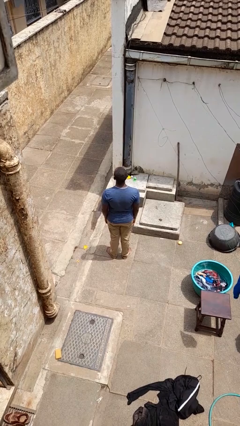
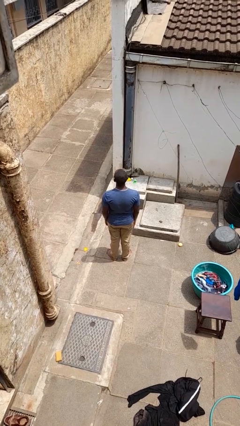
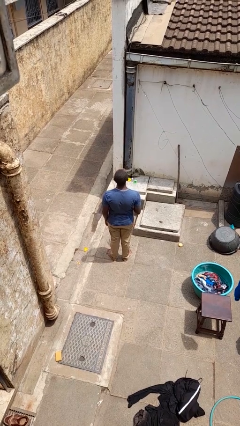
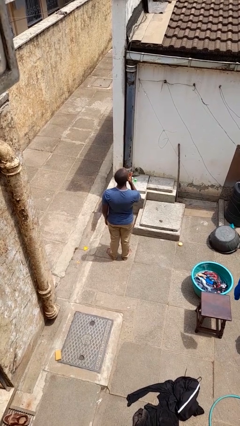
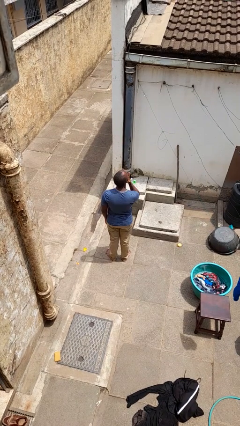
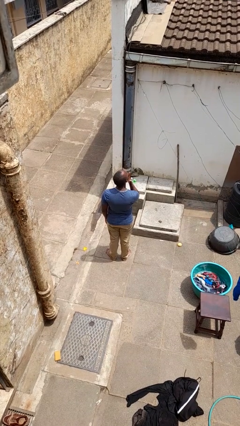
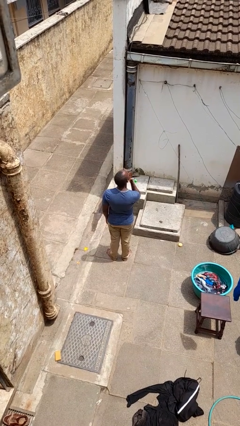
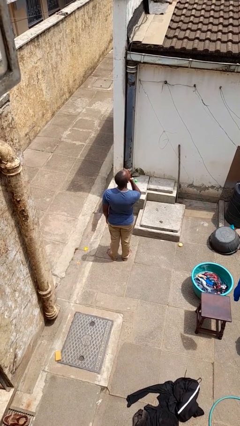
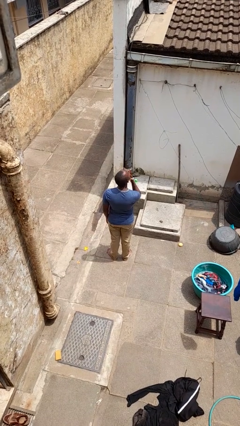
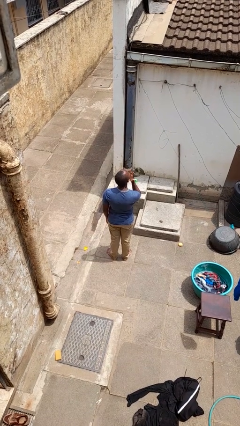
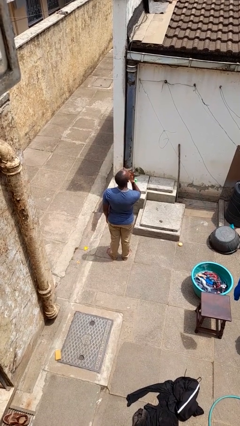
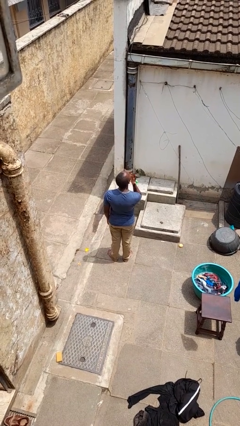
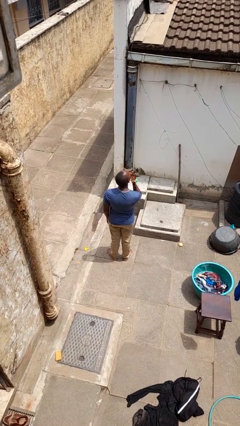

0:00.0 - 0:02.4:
person licks fingers

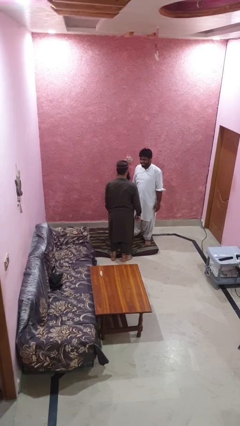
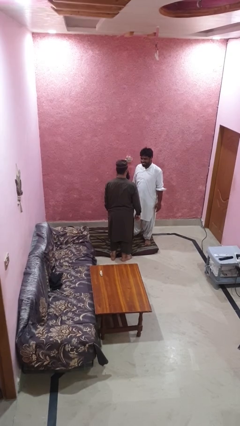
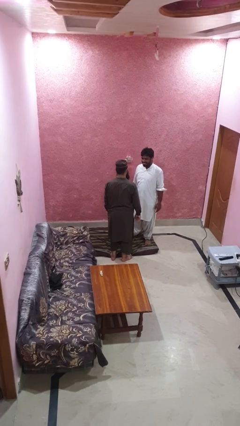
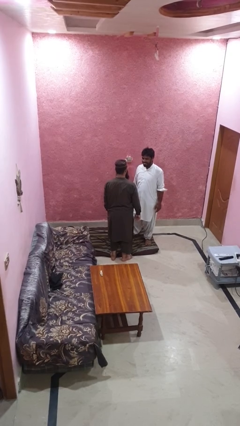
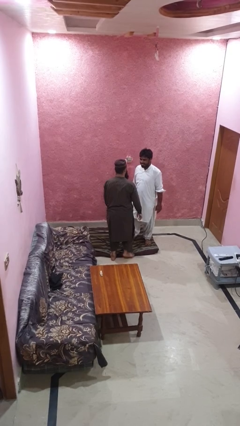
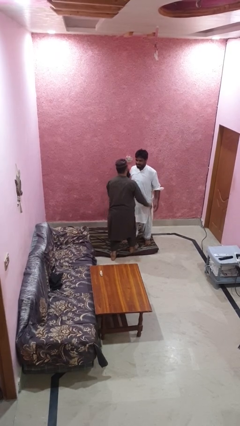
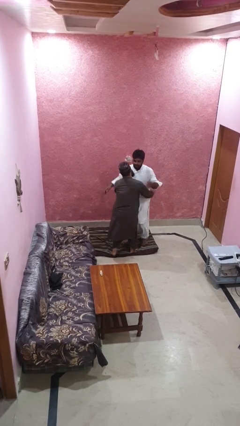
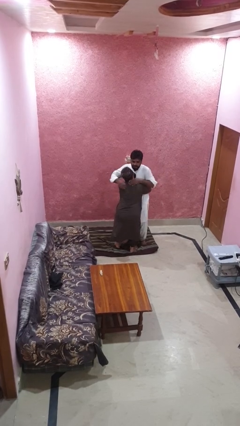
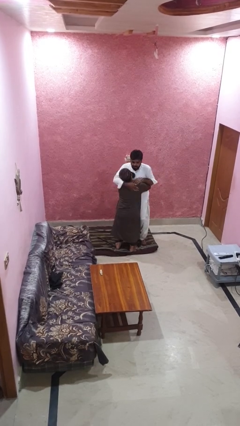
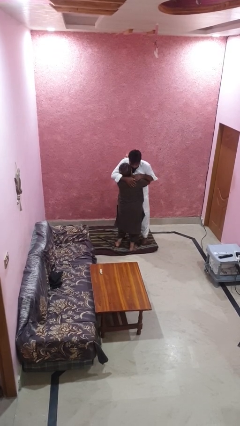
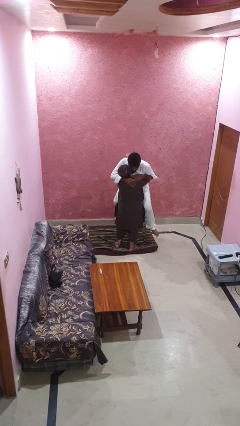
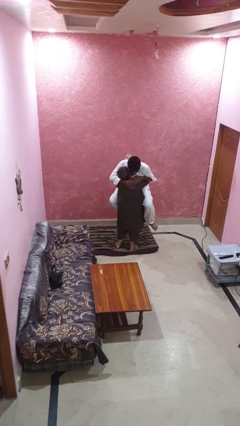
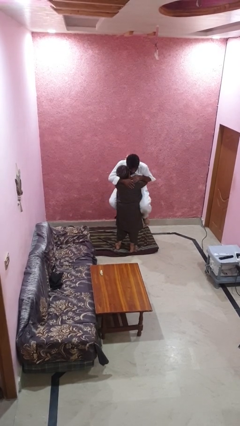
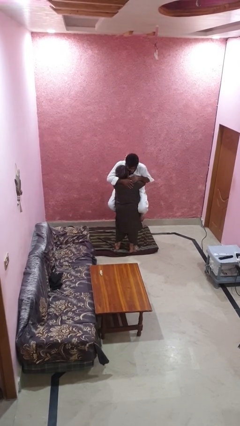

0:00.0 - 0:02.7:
person picks up person

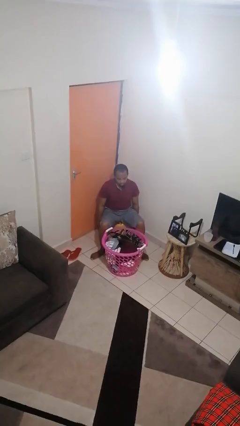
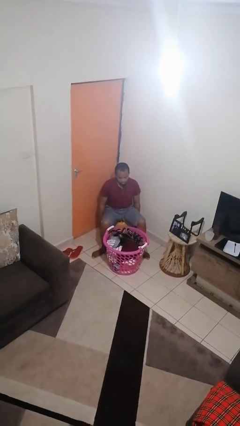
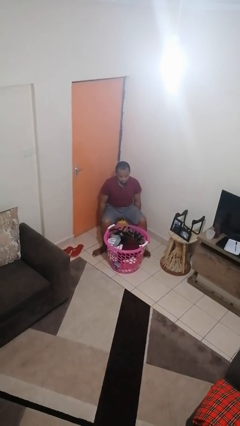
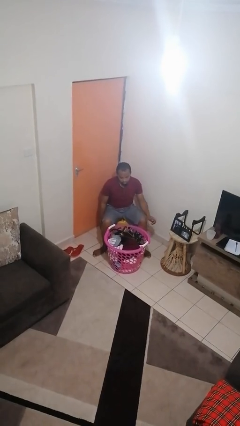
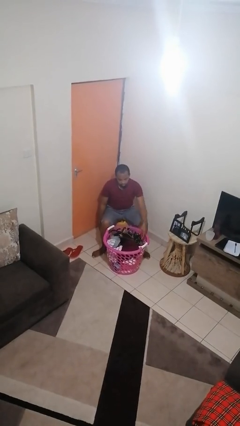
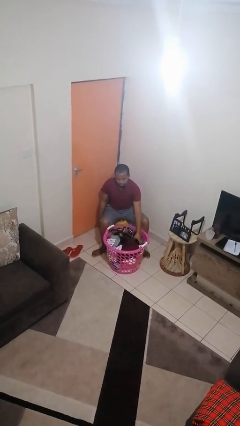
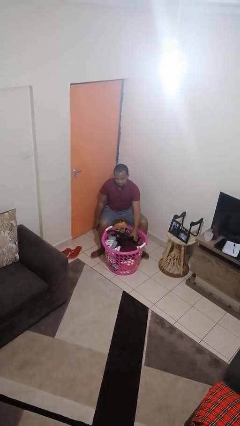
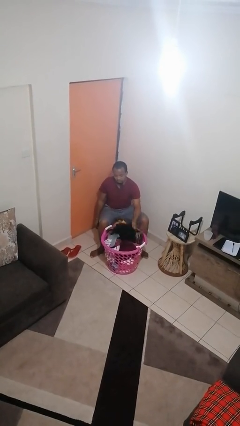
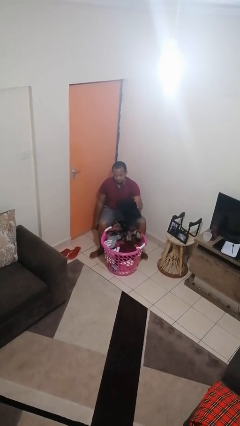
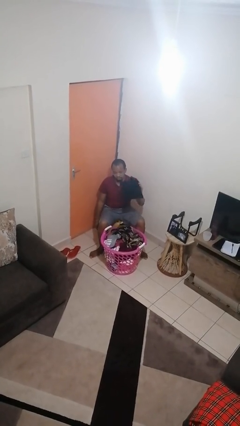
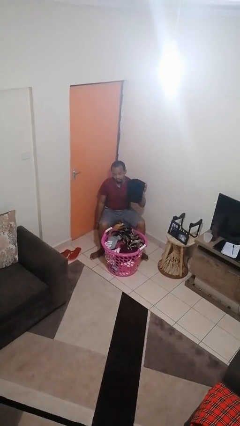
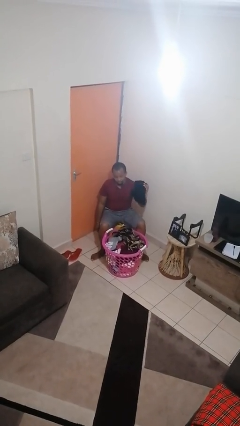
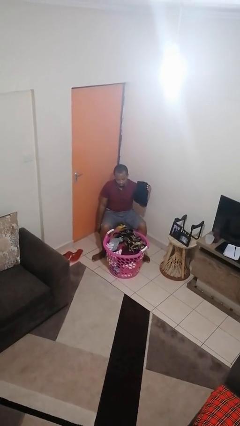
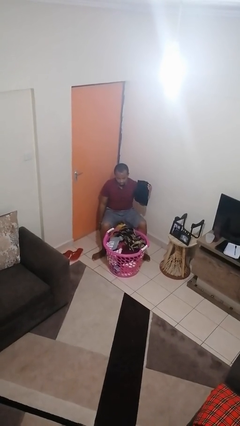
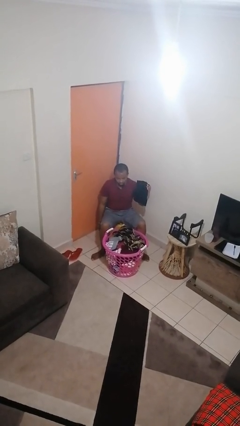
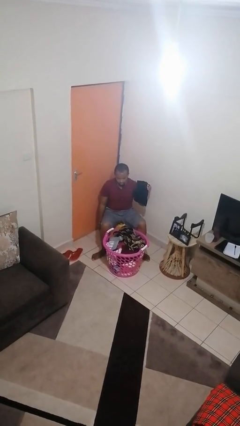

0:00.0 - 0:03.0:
person takes object from basket

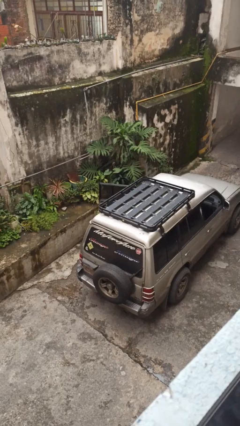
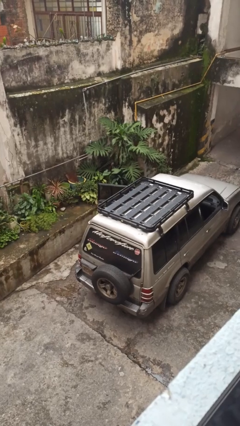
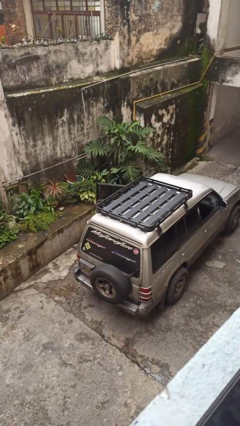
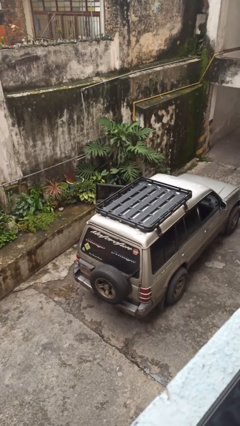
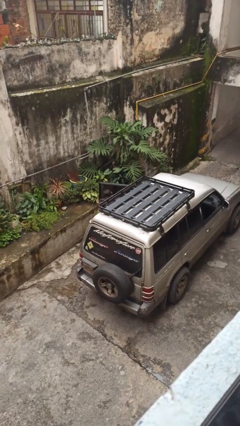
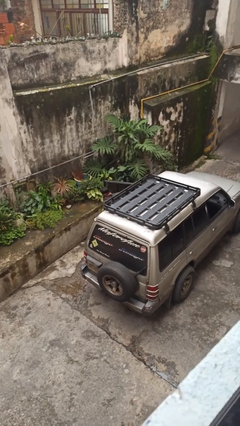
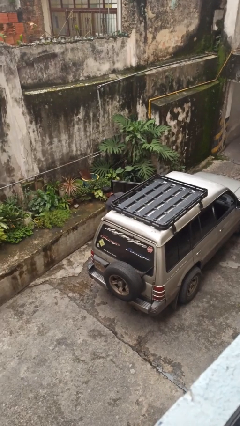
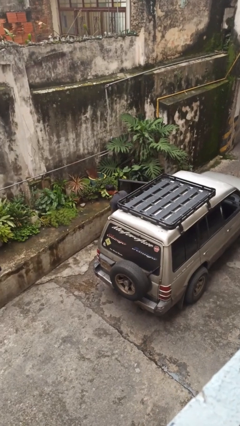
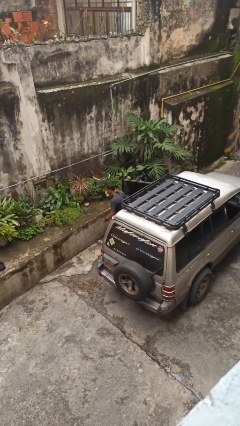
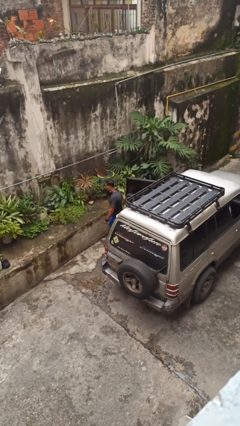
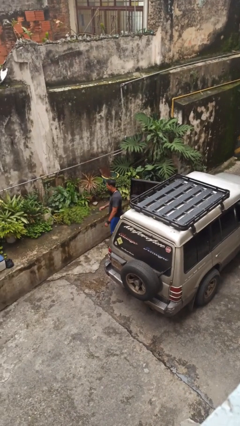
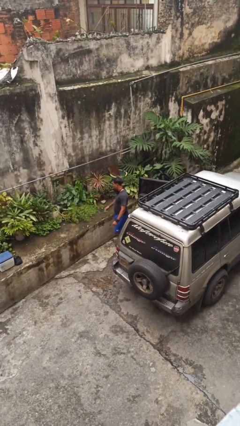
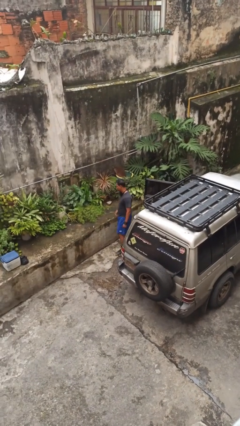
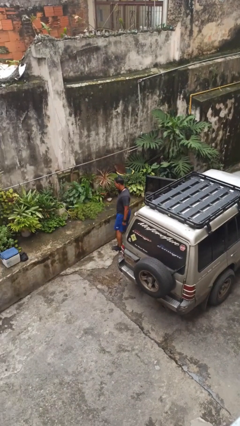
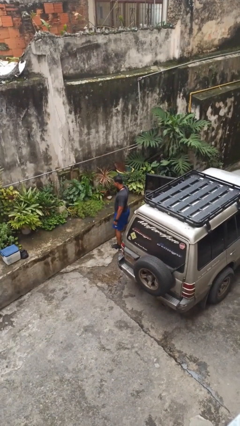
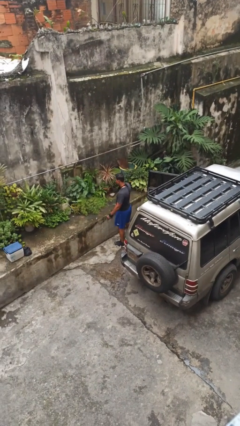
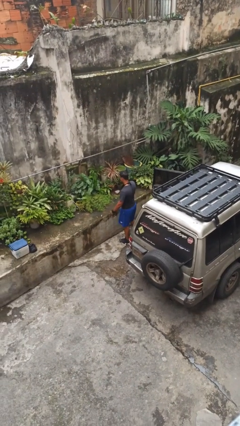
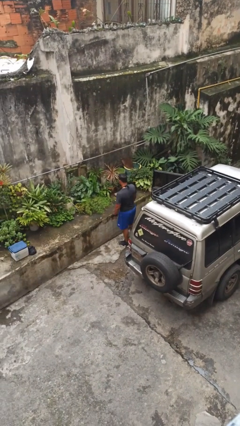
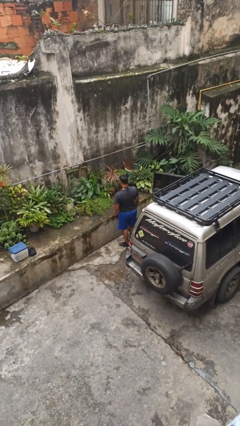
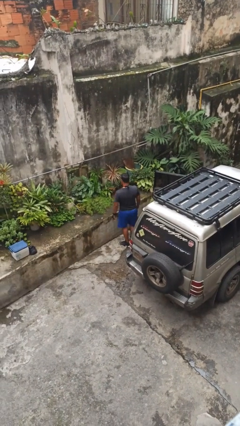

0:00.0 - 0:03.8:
person exits car

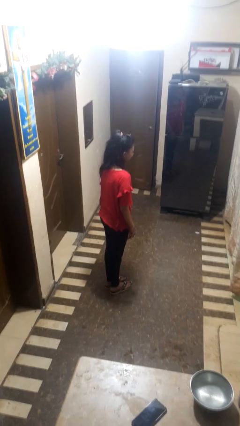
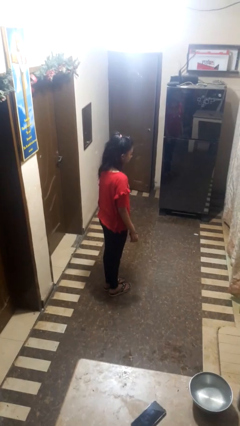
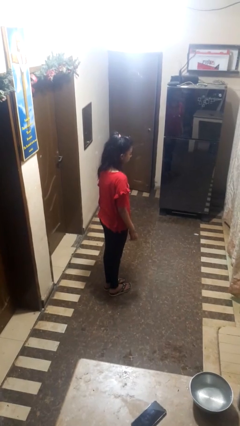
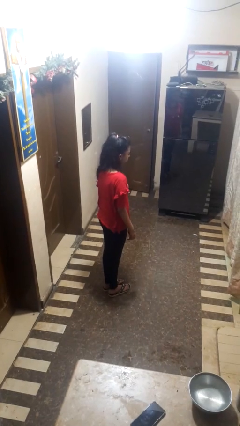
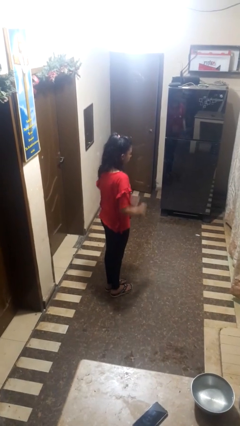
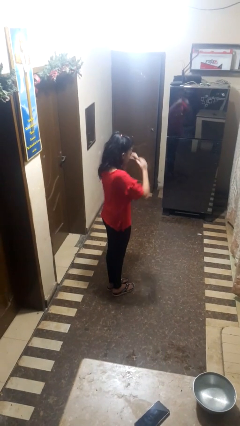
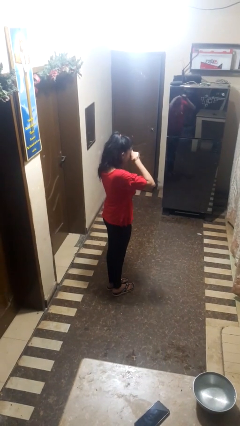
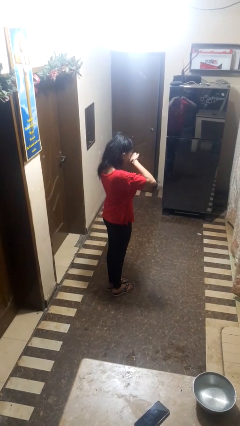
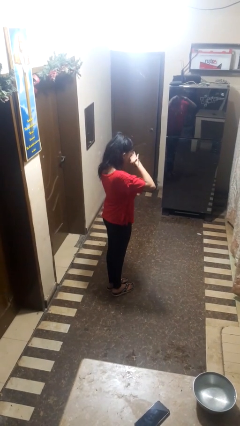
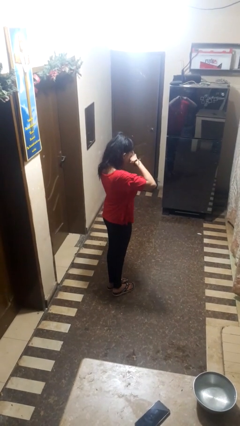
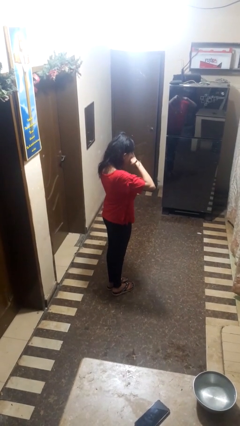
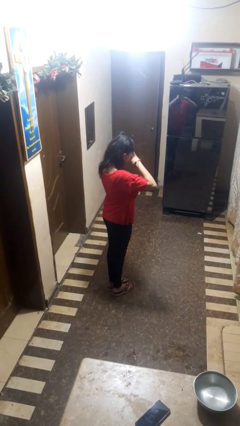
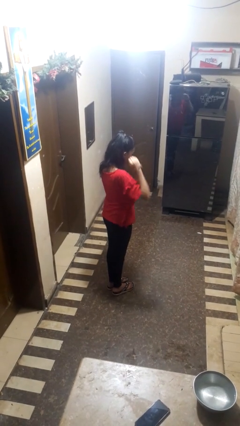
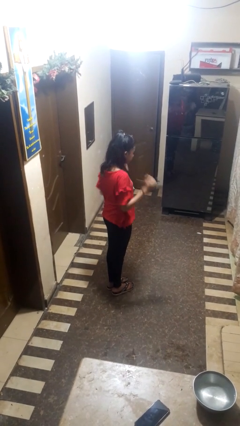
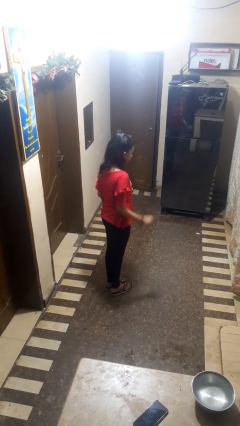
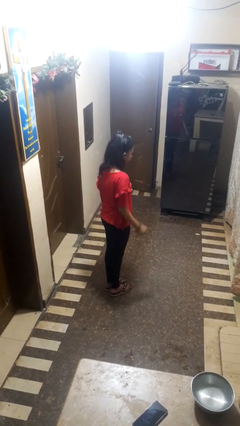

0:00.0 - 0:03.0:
person rubs eyes

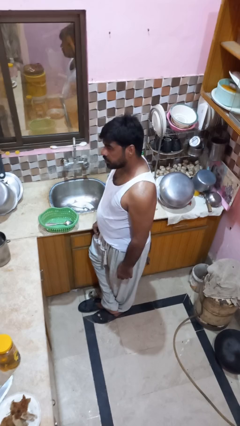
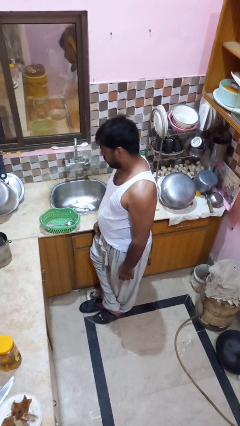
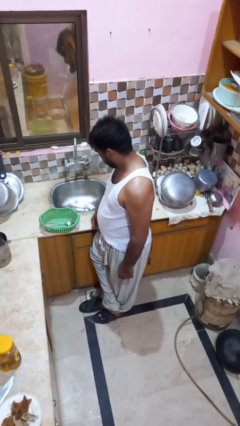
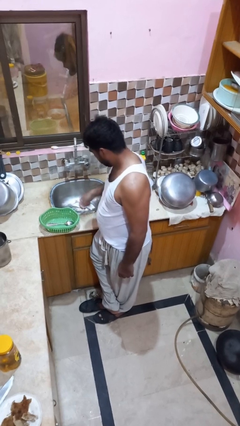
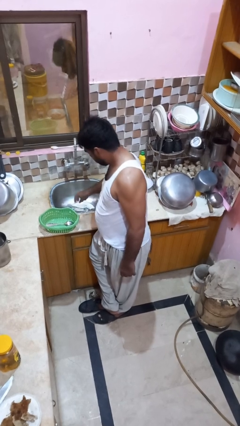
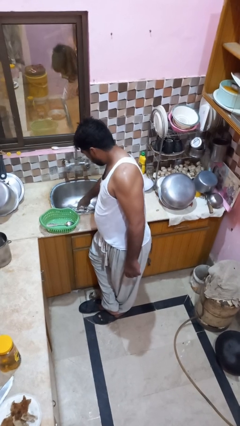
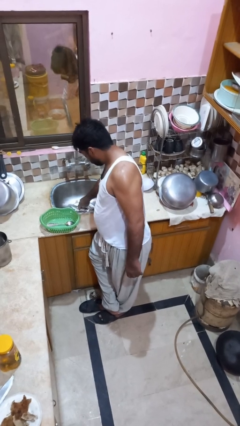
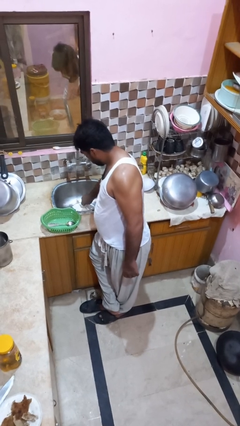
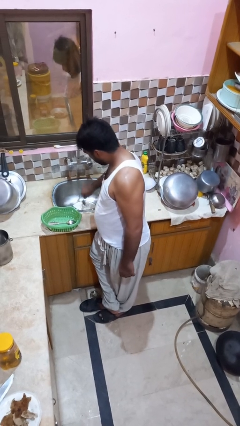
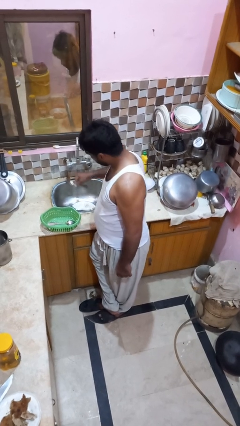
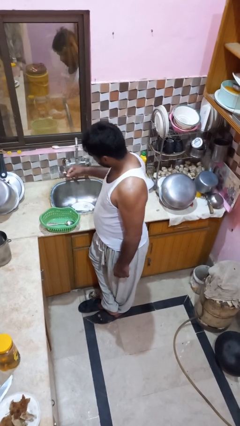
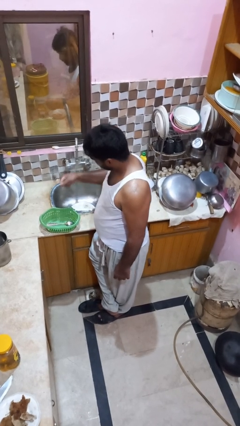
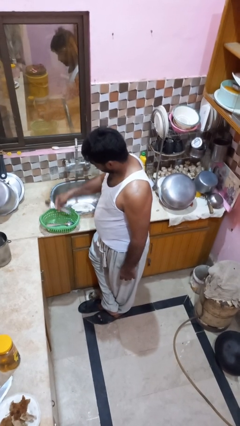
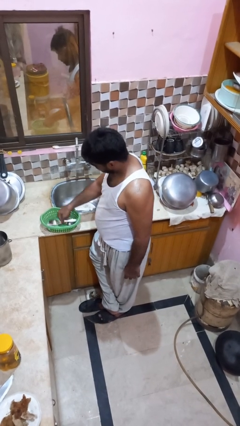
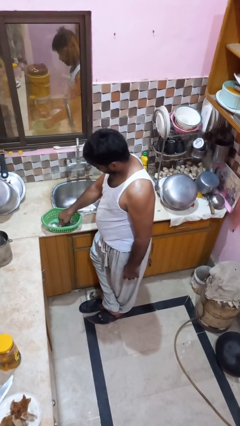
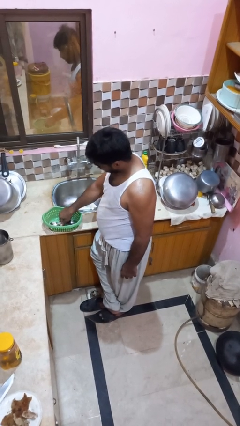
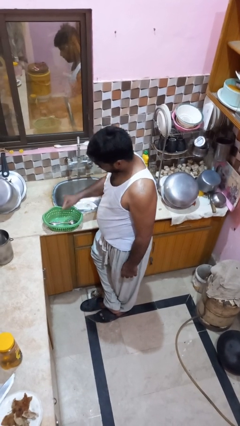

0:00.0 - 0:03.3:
person loads dishwasher
